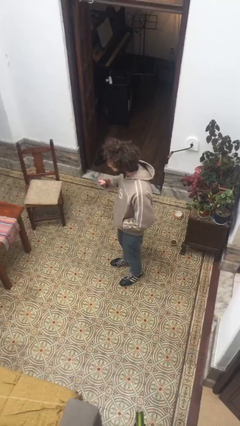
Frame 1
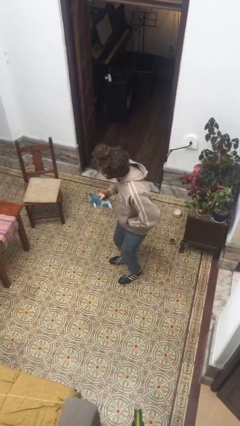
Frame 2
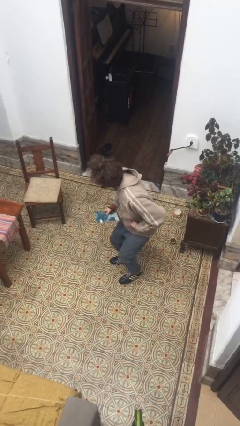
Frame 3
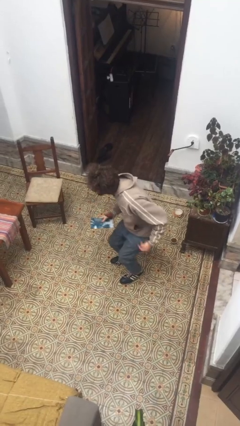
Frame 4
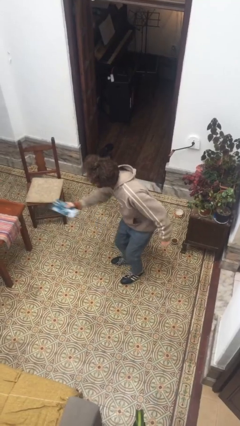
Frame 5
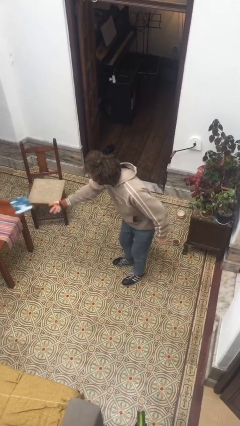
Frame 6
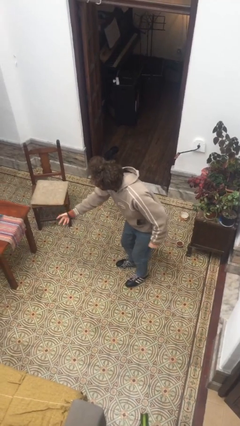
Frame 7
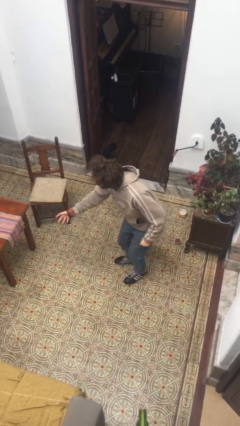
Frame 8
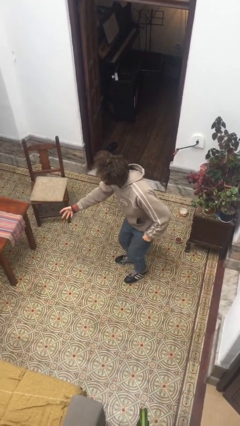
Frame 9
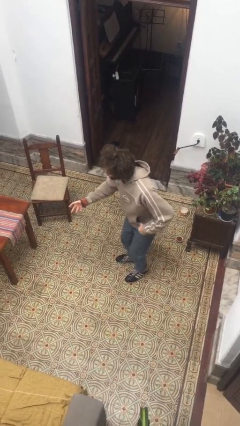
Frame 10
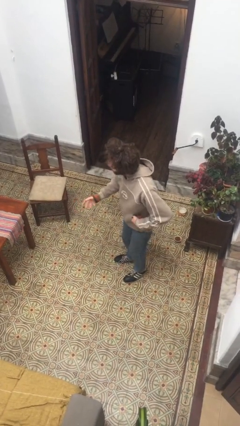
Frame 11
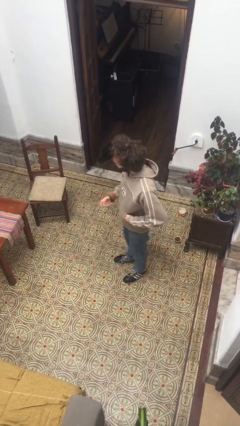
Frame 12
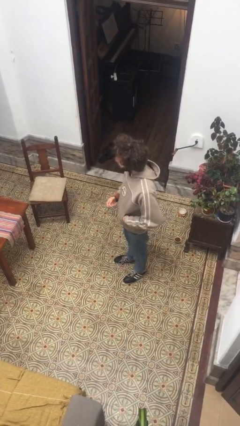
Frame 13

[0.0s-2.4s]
person throws object on bed

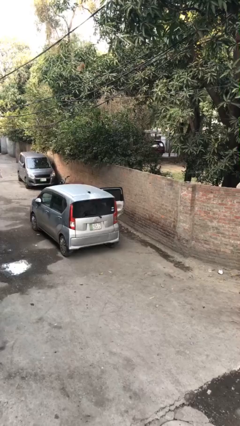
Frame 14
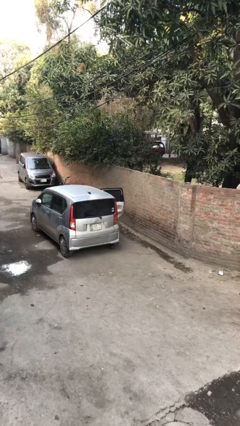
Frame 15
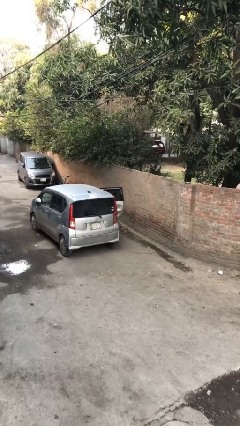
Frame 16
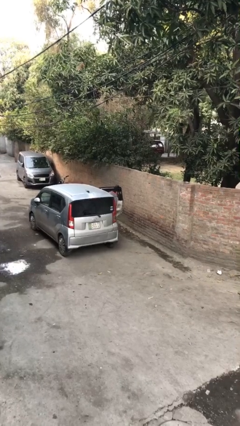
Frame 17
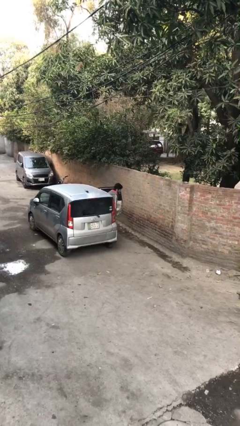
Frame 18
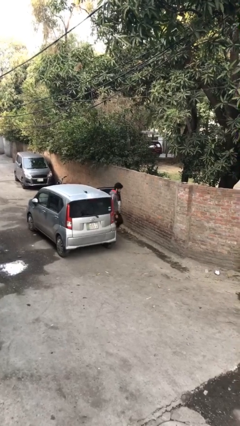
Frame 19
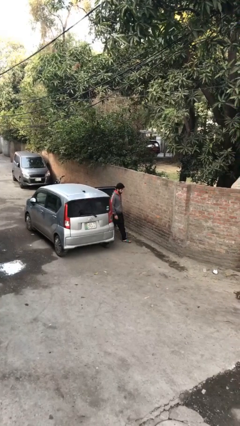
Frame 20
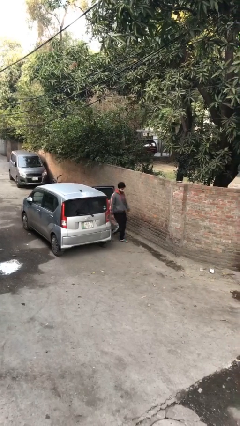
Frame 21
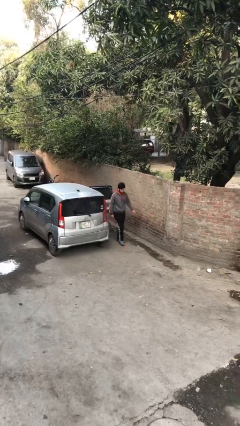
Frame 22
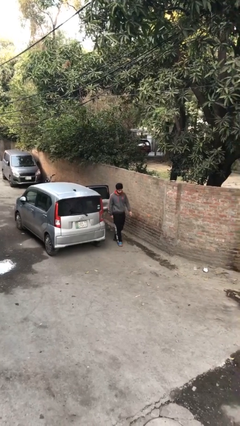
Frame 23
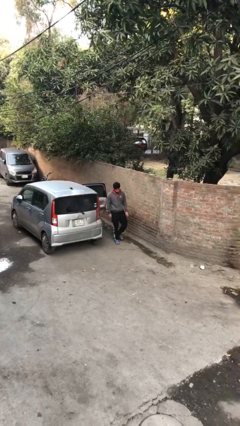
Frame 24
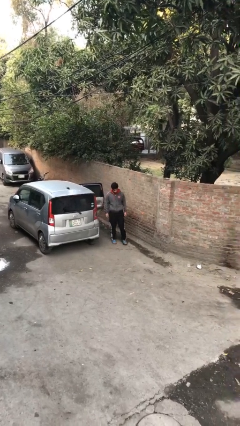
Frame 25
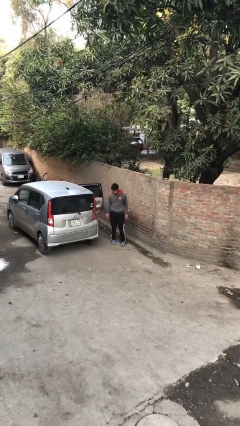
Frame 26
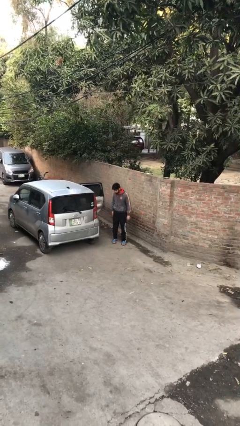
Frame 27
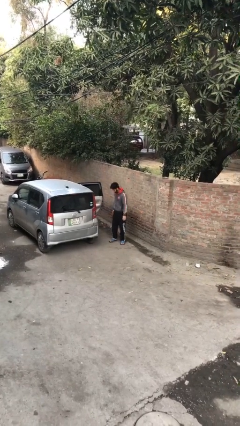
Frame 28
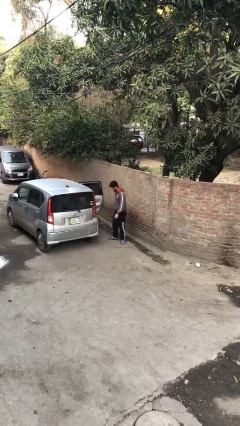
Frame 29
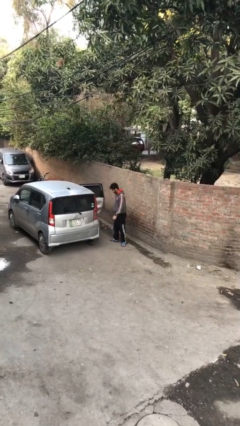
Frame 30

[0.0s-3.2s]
person exits car

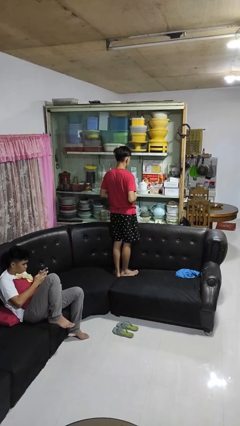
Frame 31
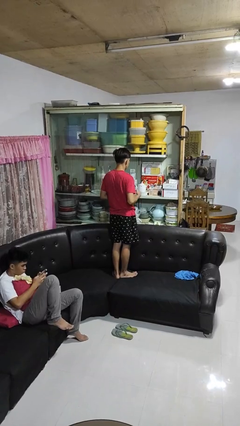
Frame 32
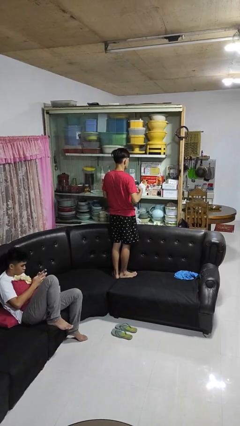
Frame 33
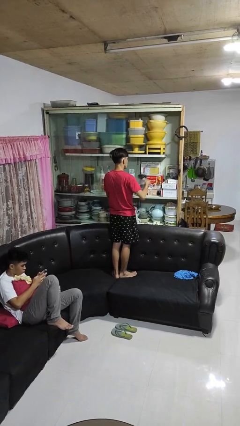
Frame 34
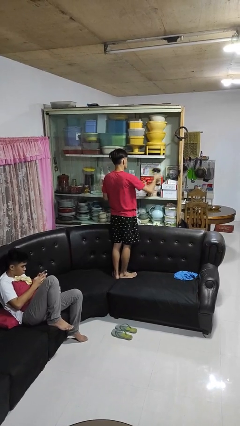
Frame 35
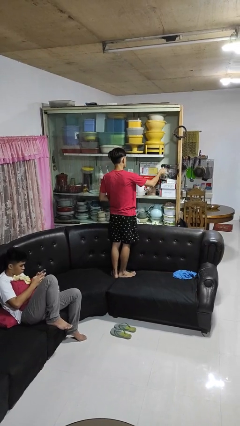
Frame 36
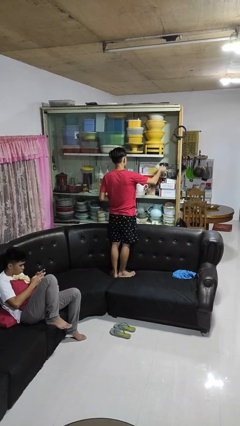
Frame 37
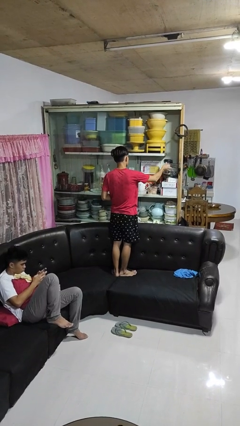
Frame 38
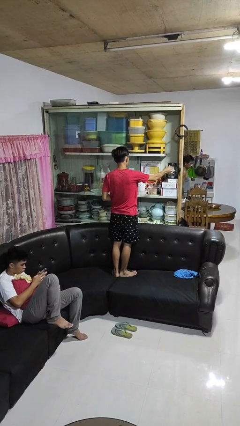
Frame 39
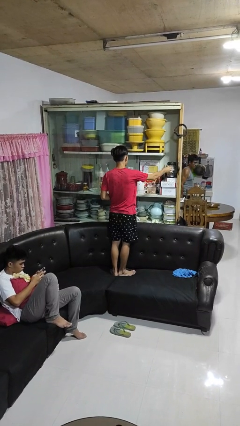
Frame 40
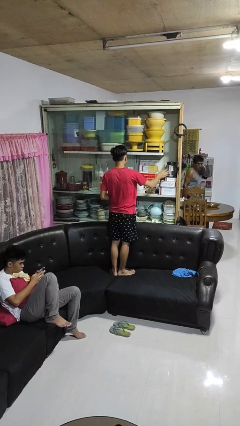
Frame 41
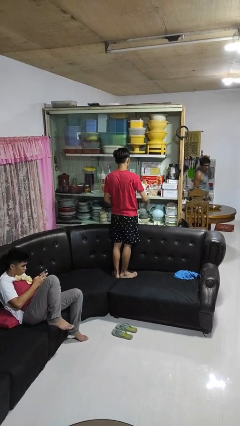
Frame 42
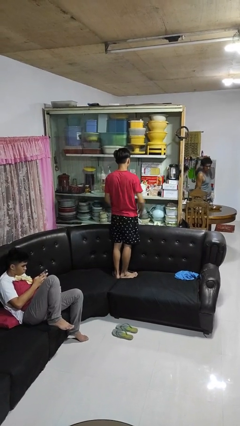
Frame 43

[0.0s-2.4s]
person puts down object into cabinet

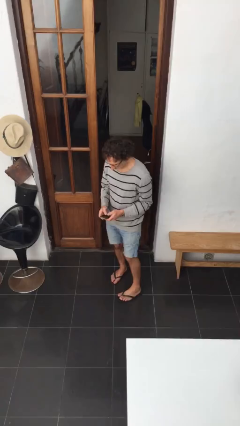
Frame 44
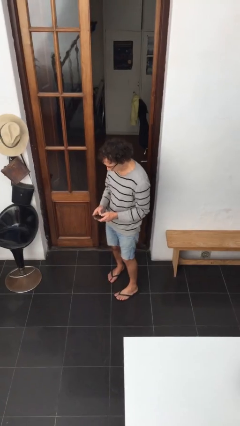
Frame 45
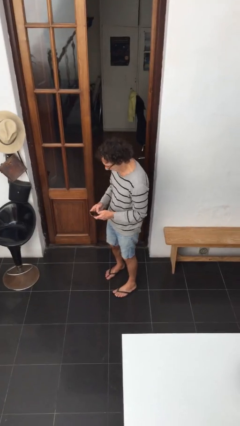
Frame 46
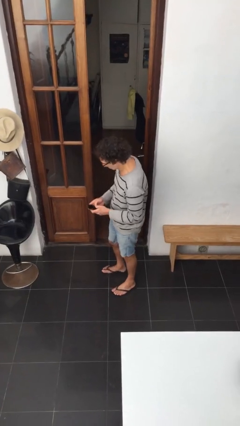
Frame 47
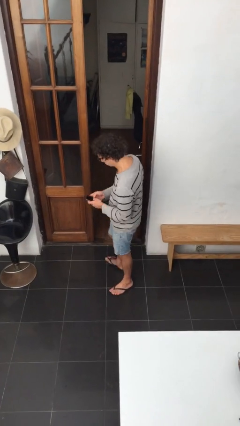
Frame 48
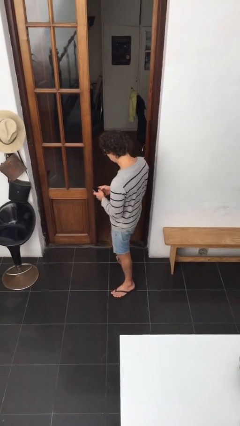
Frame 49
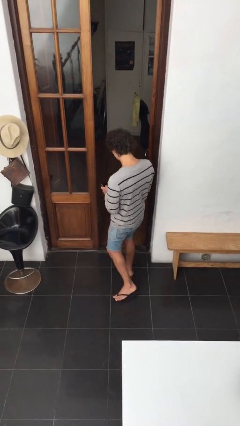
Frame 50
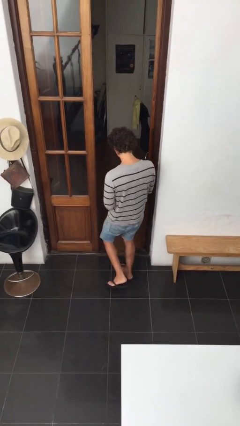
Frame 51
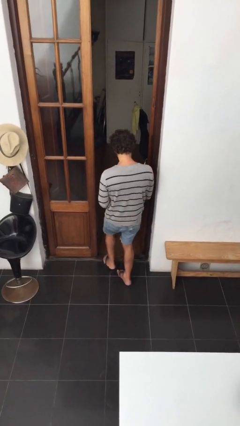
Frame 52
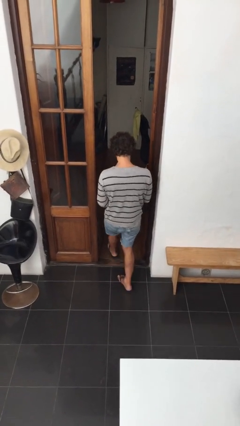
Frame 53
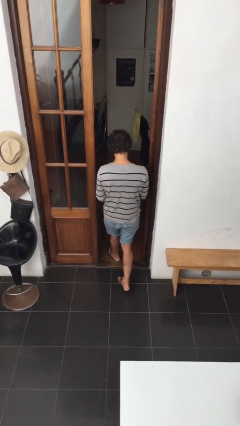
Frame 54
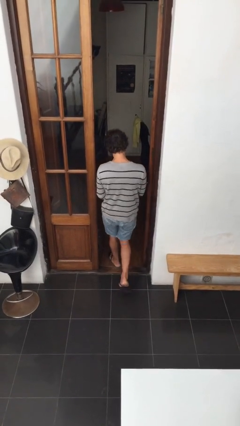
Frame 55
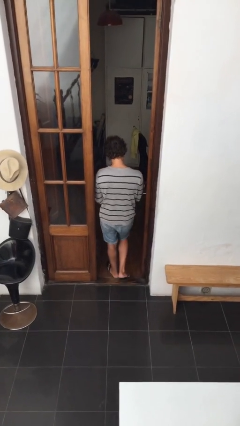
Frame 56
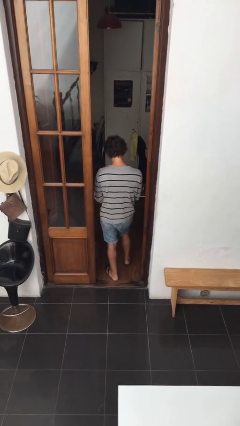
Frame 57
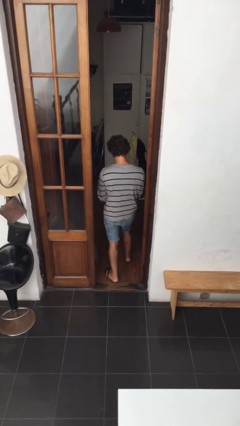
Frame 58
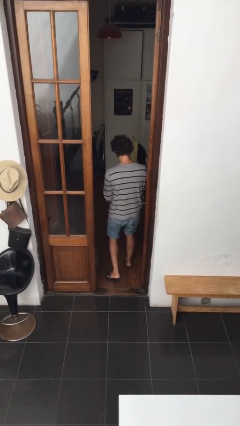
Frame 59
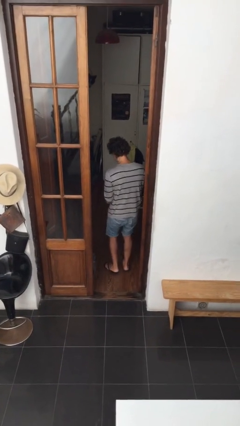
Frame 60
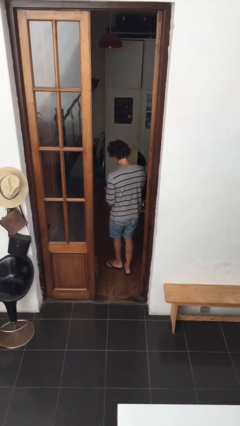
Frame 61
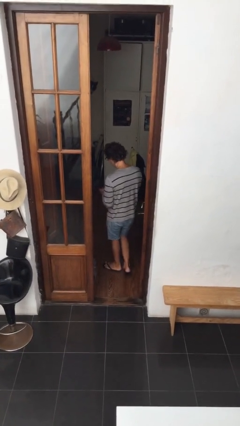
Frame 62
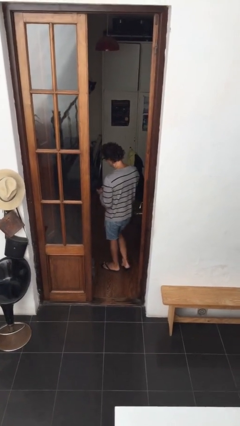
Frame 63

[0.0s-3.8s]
person exits scene through structure

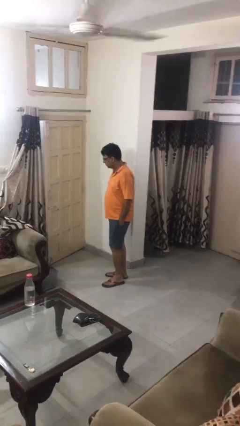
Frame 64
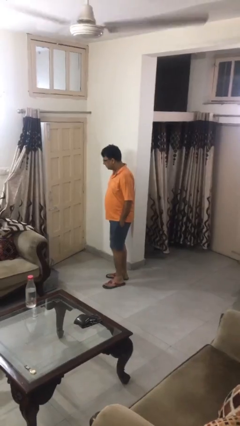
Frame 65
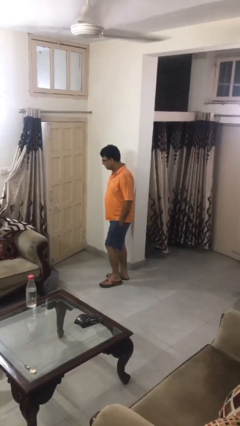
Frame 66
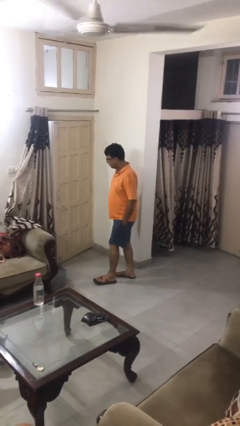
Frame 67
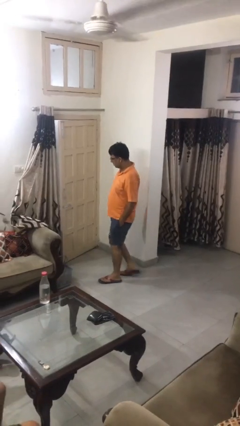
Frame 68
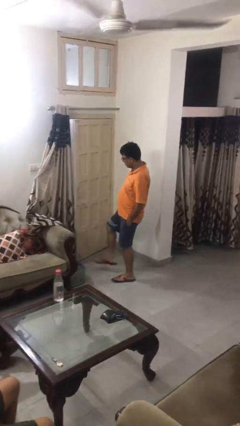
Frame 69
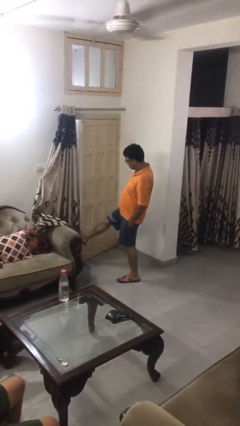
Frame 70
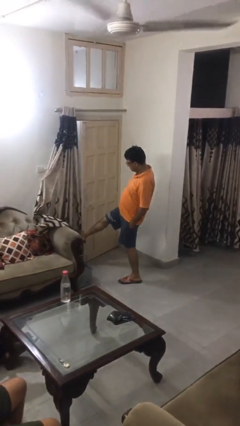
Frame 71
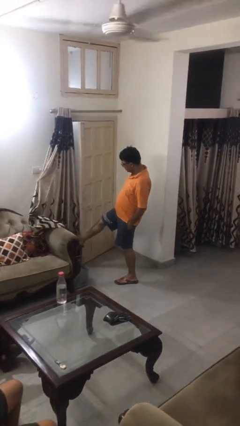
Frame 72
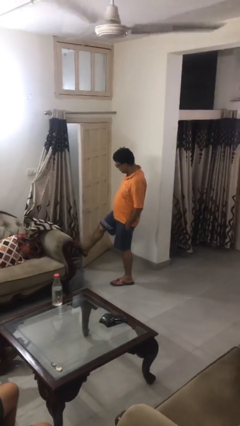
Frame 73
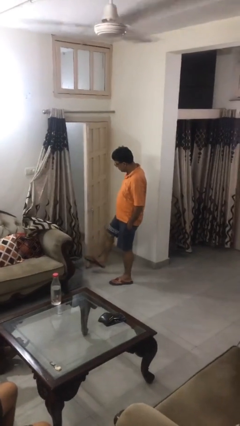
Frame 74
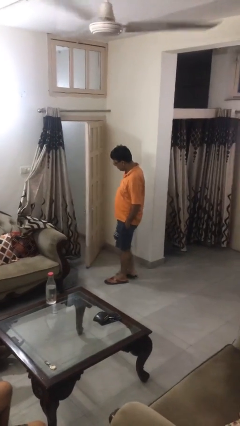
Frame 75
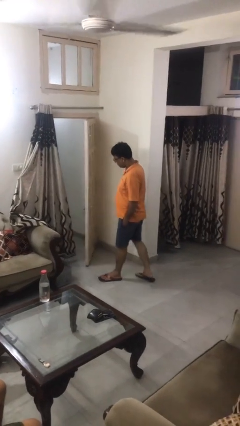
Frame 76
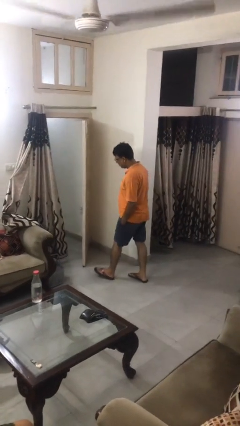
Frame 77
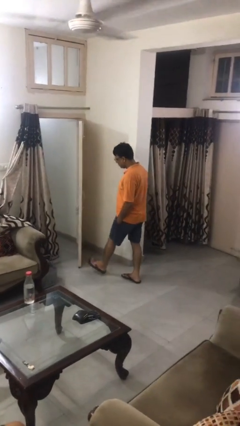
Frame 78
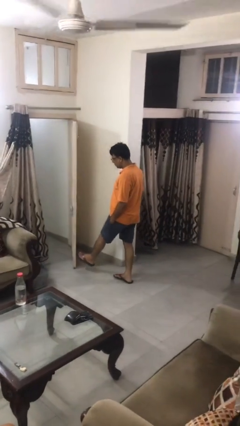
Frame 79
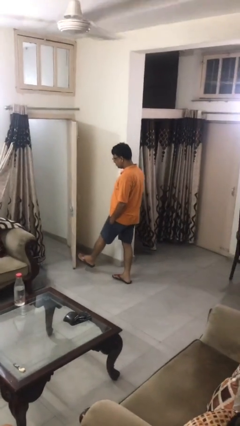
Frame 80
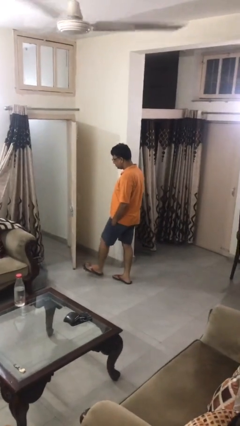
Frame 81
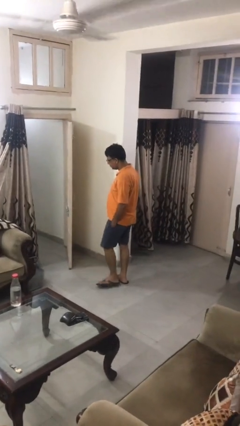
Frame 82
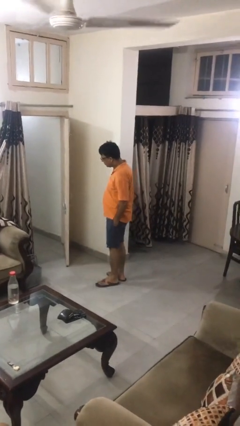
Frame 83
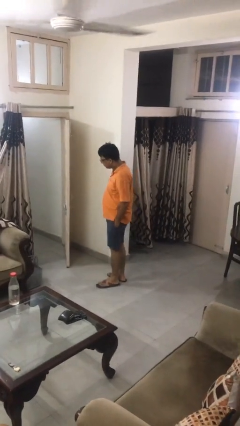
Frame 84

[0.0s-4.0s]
person opens facility door

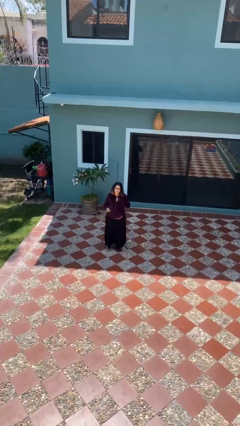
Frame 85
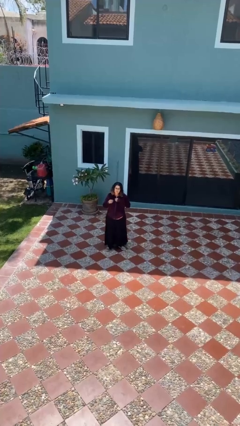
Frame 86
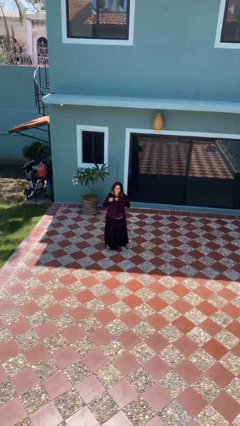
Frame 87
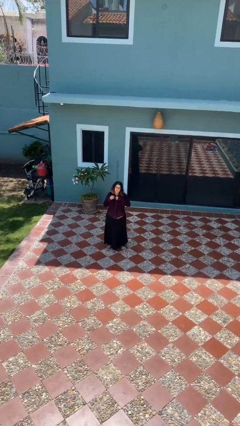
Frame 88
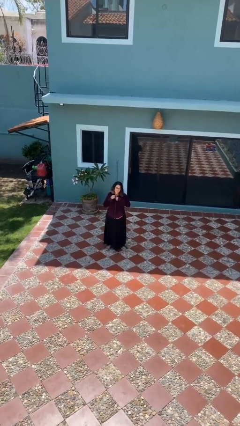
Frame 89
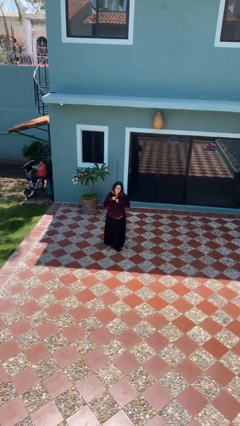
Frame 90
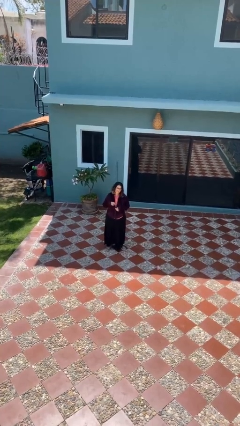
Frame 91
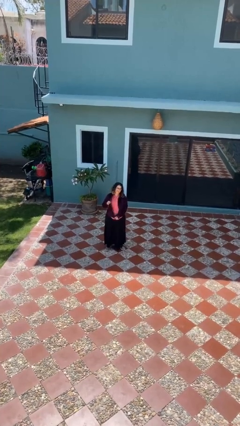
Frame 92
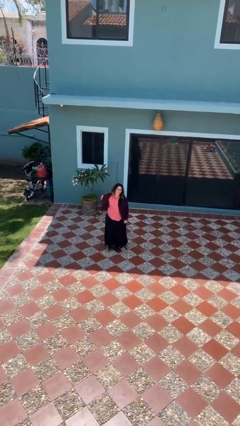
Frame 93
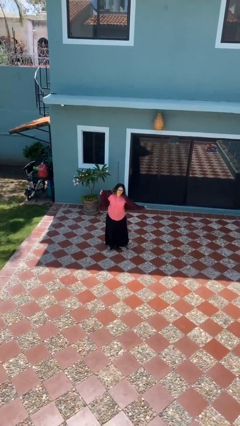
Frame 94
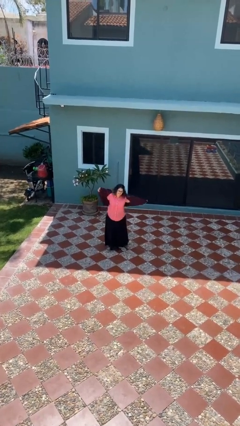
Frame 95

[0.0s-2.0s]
person unzips jacket
